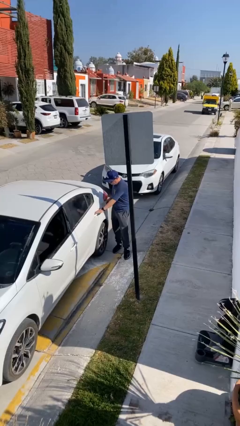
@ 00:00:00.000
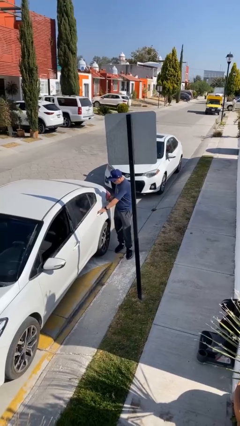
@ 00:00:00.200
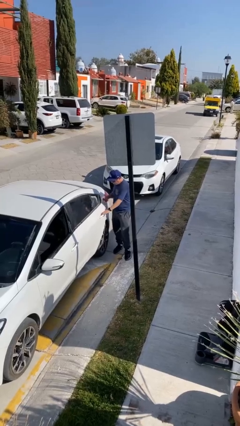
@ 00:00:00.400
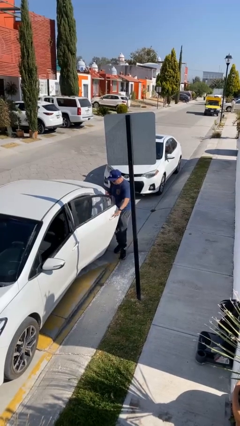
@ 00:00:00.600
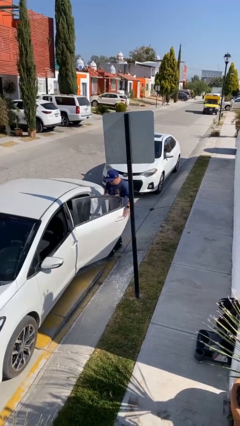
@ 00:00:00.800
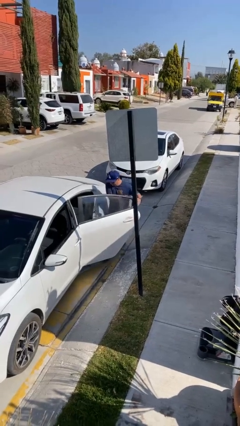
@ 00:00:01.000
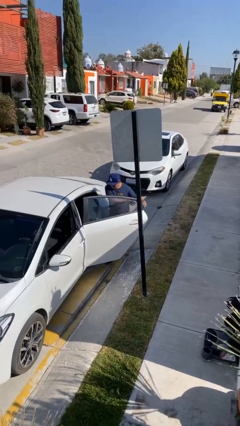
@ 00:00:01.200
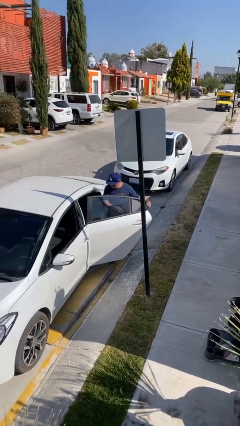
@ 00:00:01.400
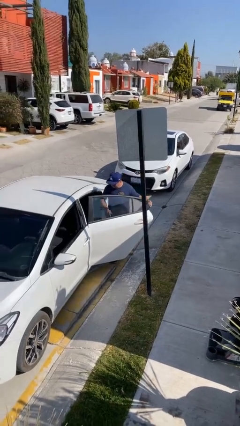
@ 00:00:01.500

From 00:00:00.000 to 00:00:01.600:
person opens car door

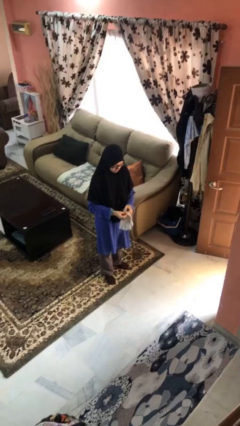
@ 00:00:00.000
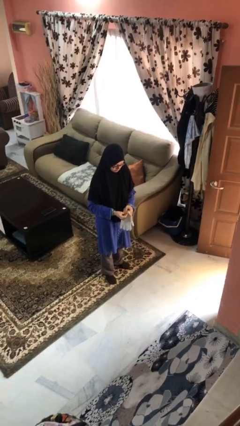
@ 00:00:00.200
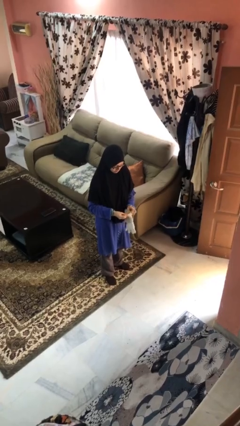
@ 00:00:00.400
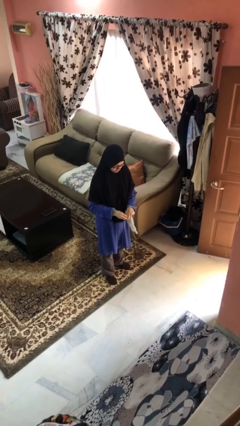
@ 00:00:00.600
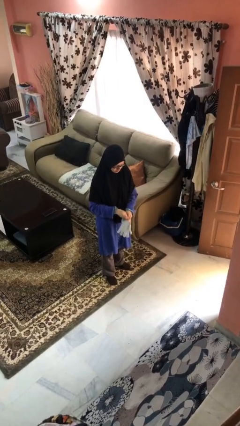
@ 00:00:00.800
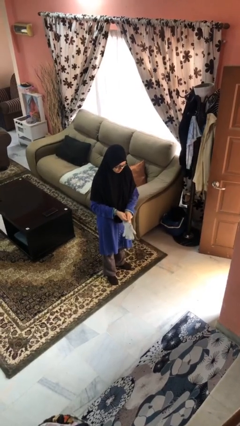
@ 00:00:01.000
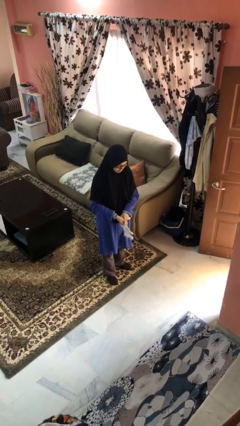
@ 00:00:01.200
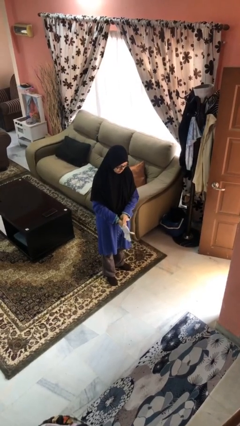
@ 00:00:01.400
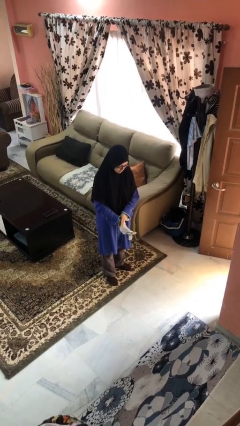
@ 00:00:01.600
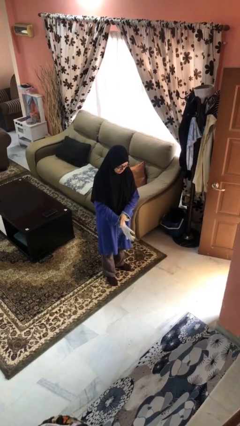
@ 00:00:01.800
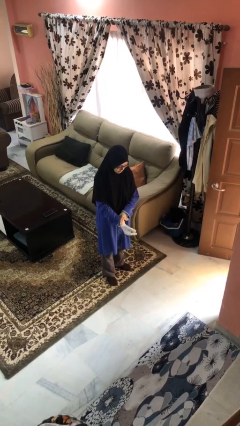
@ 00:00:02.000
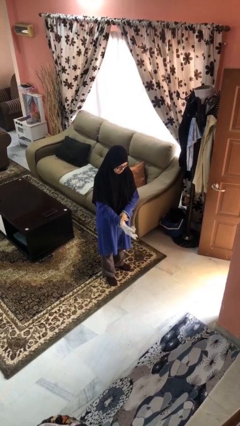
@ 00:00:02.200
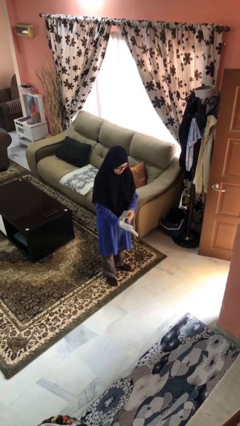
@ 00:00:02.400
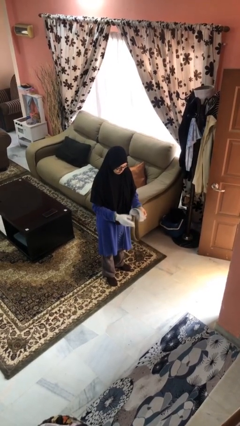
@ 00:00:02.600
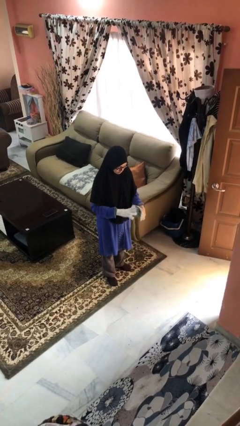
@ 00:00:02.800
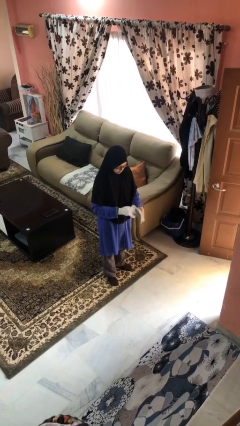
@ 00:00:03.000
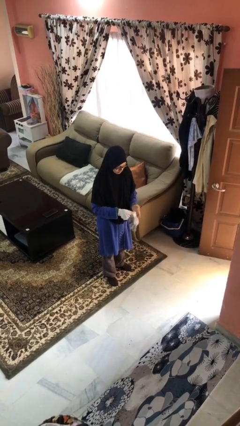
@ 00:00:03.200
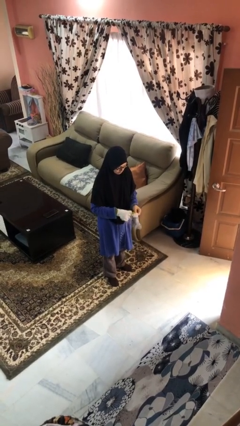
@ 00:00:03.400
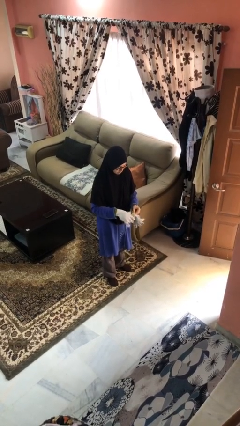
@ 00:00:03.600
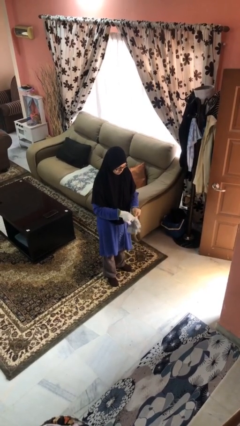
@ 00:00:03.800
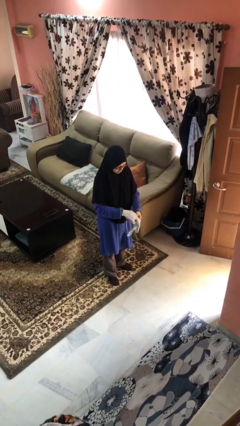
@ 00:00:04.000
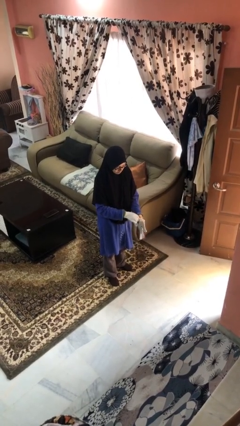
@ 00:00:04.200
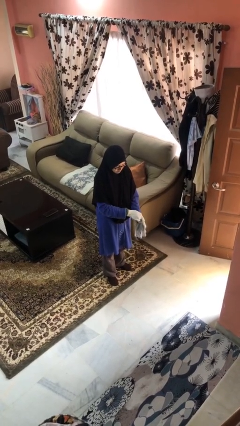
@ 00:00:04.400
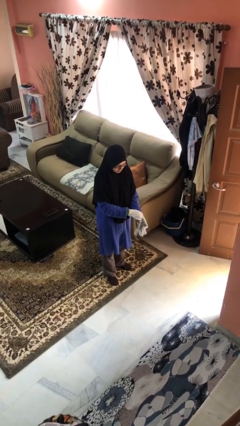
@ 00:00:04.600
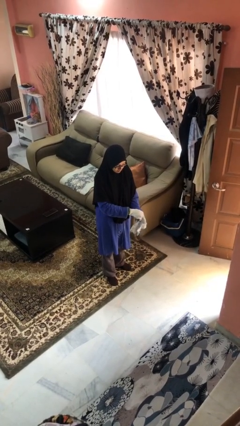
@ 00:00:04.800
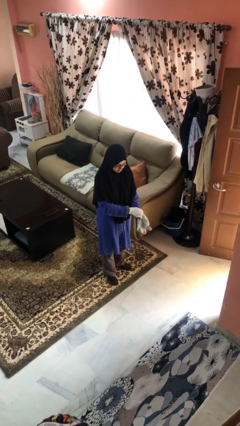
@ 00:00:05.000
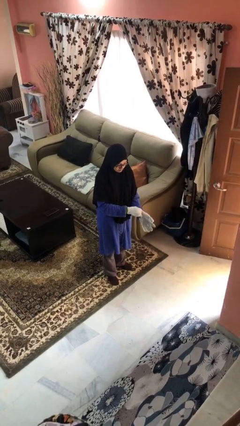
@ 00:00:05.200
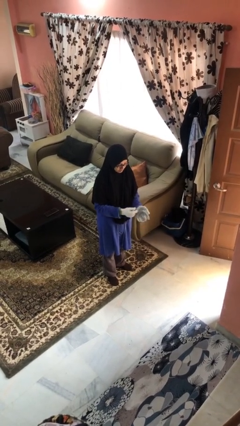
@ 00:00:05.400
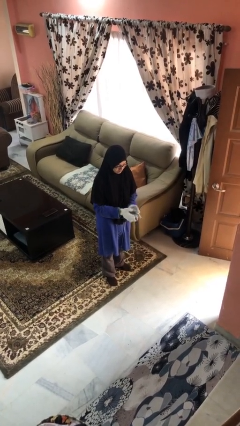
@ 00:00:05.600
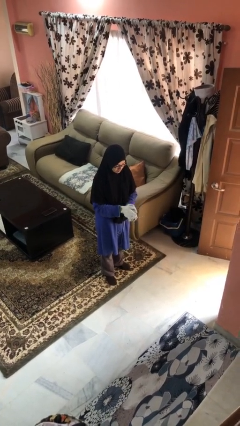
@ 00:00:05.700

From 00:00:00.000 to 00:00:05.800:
person puts on gloves

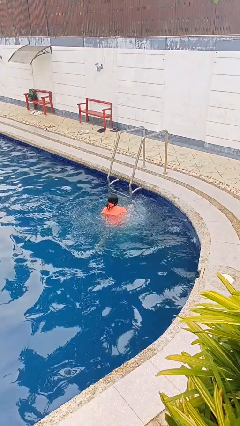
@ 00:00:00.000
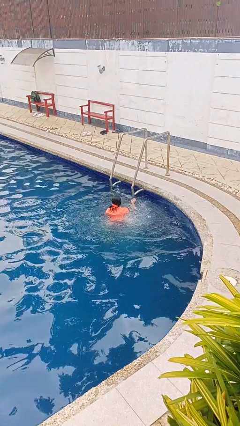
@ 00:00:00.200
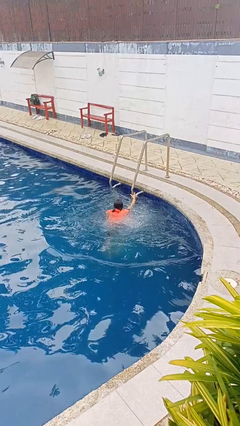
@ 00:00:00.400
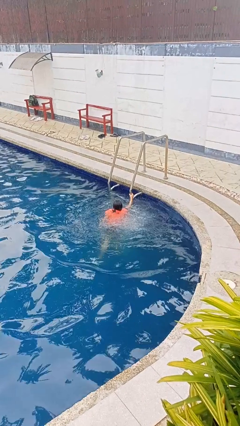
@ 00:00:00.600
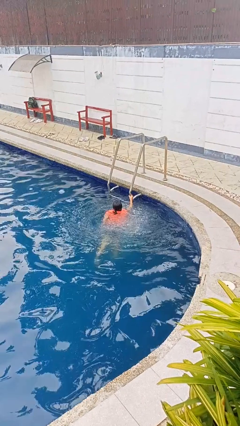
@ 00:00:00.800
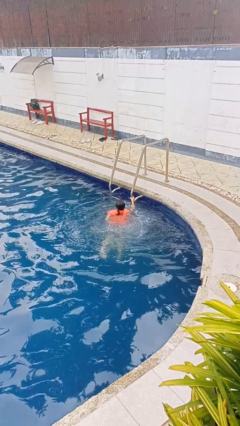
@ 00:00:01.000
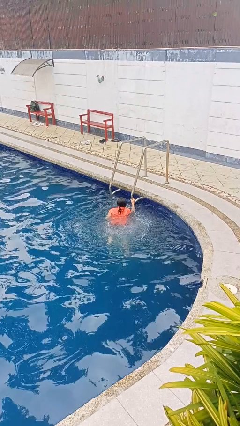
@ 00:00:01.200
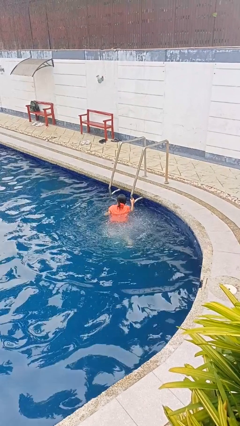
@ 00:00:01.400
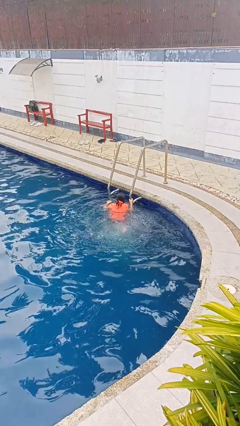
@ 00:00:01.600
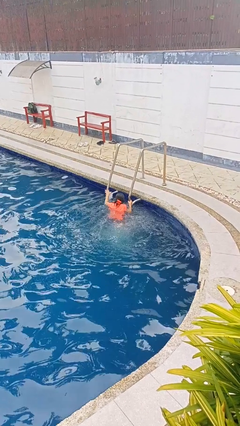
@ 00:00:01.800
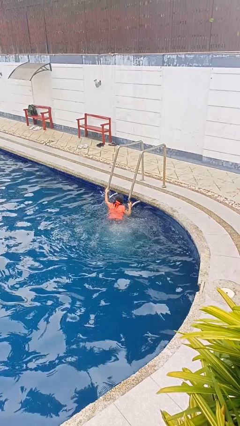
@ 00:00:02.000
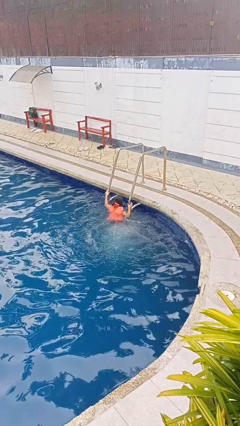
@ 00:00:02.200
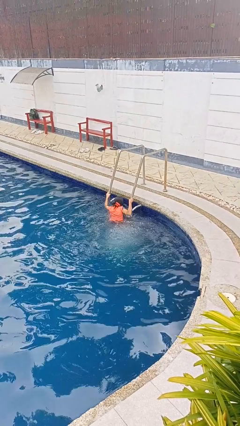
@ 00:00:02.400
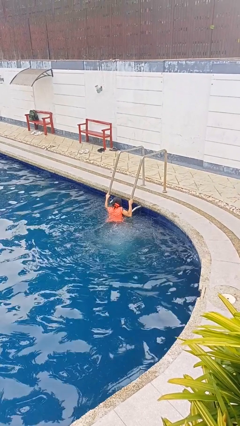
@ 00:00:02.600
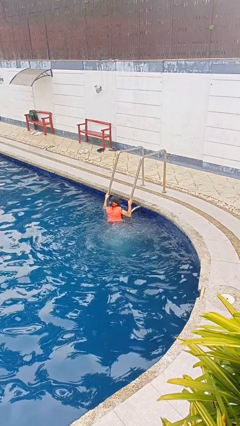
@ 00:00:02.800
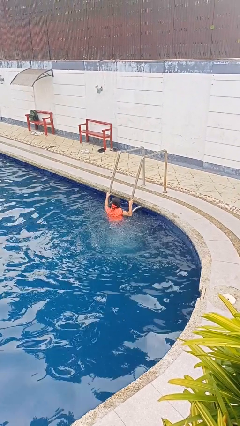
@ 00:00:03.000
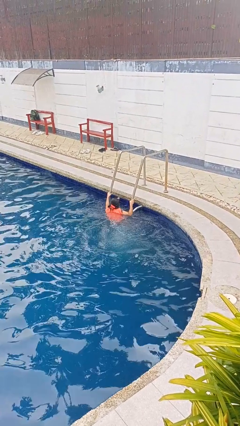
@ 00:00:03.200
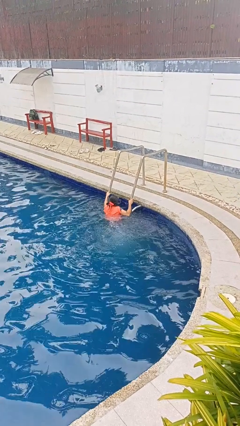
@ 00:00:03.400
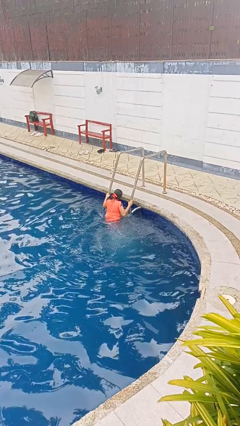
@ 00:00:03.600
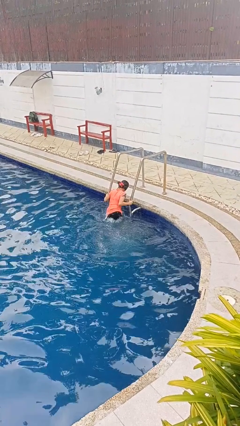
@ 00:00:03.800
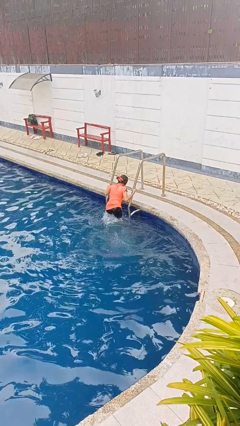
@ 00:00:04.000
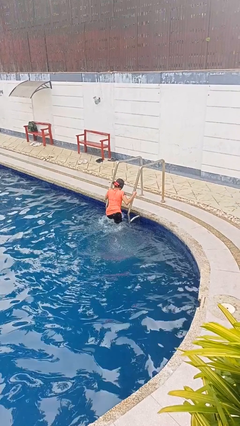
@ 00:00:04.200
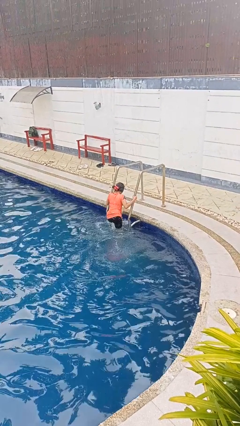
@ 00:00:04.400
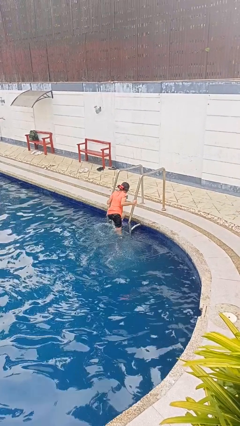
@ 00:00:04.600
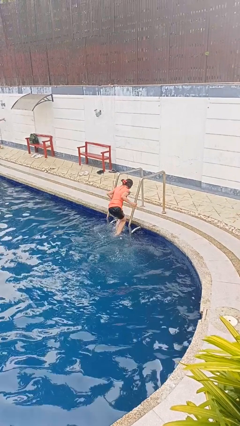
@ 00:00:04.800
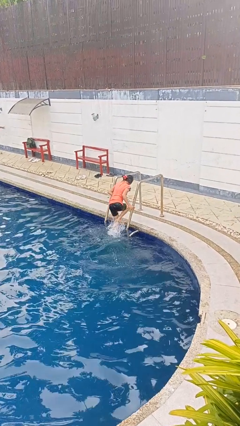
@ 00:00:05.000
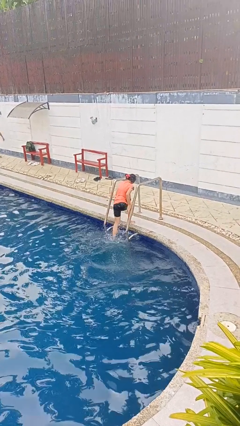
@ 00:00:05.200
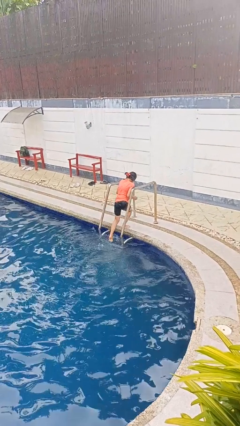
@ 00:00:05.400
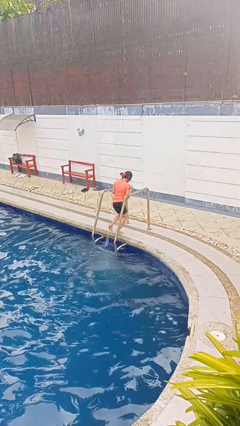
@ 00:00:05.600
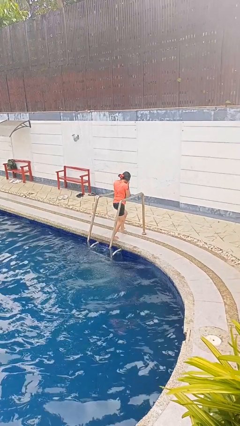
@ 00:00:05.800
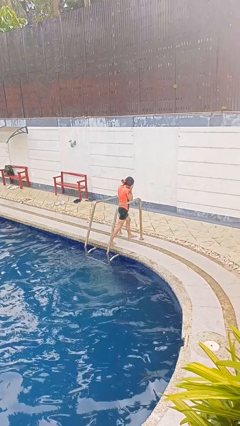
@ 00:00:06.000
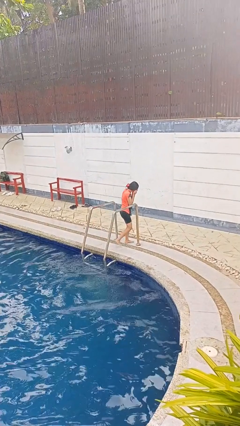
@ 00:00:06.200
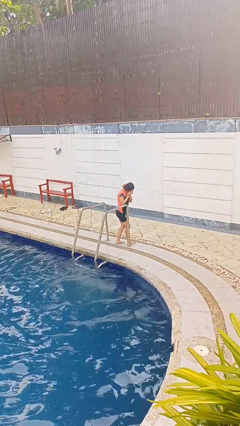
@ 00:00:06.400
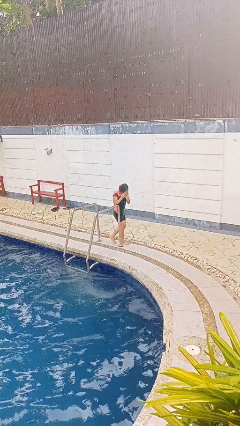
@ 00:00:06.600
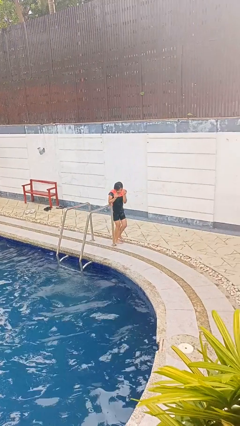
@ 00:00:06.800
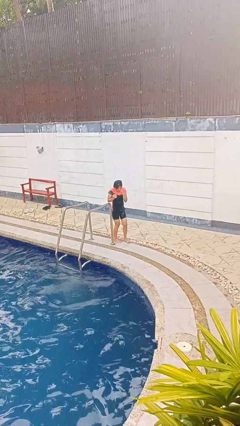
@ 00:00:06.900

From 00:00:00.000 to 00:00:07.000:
person exits pool

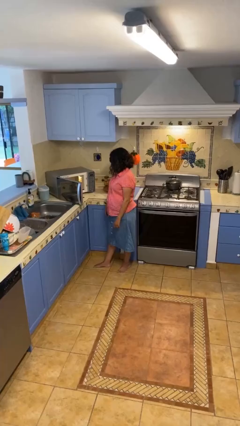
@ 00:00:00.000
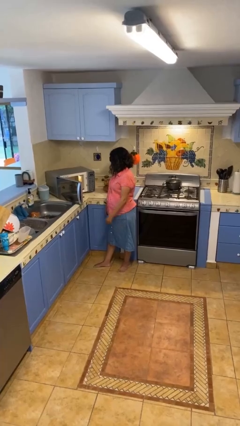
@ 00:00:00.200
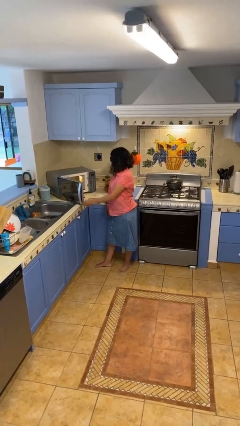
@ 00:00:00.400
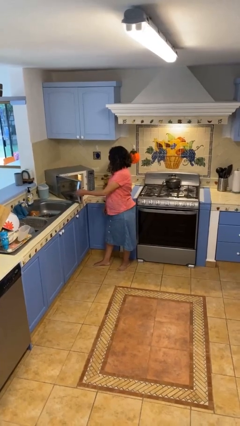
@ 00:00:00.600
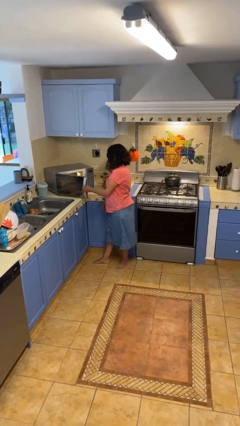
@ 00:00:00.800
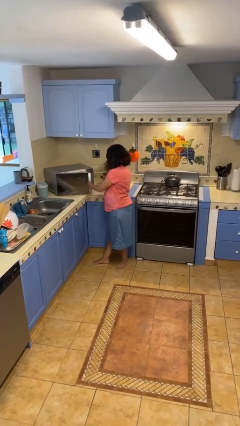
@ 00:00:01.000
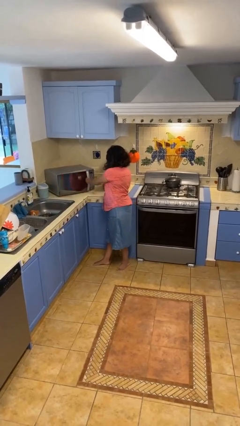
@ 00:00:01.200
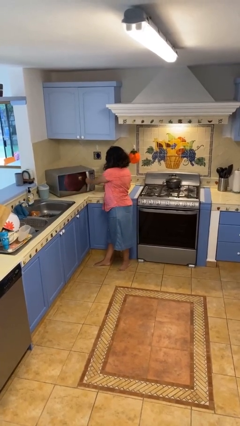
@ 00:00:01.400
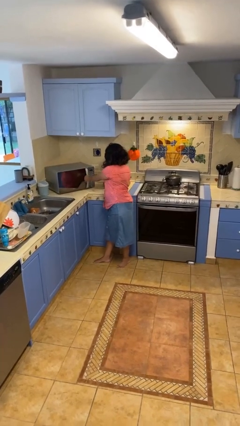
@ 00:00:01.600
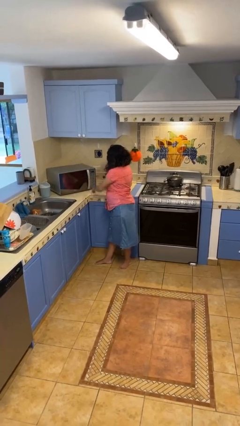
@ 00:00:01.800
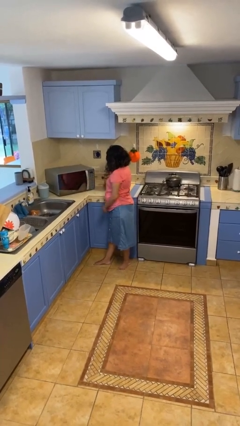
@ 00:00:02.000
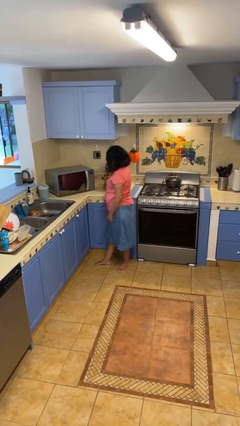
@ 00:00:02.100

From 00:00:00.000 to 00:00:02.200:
person closes microwave

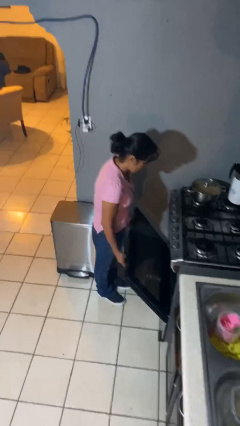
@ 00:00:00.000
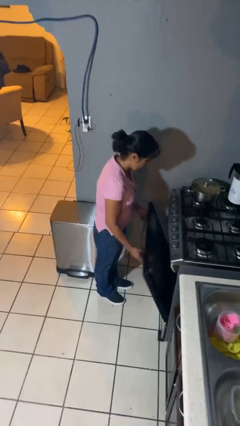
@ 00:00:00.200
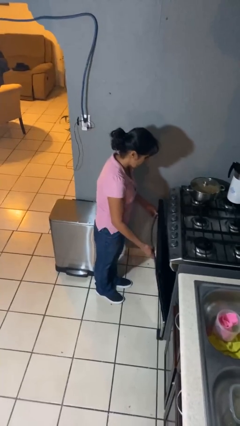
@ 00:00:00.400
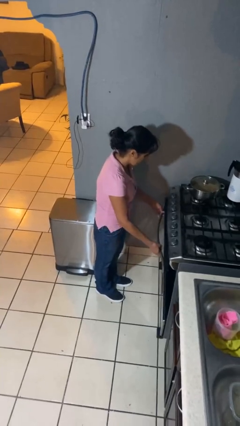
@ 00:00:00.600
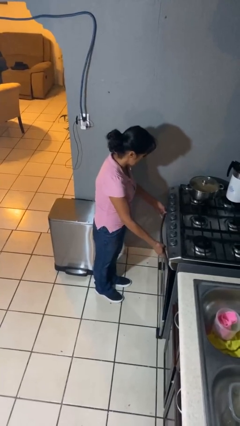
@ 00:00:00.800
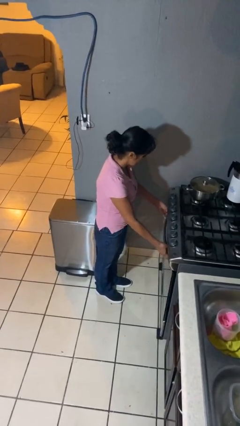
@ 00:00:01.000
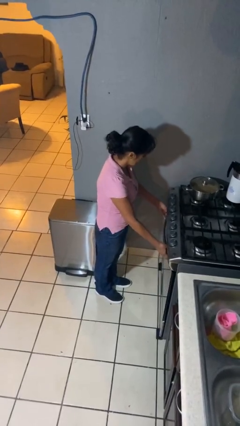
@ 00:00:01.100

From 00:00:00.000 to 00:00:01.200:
person closes oven door
